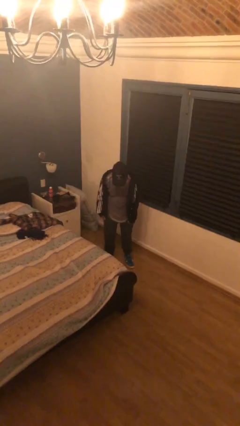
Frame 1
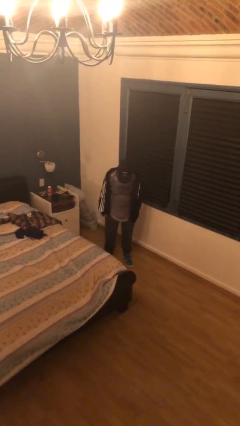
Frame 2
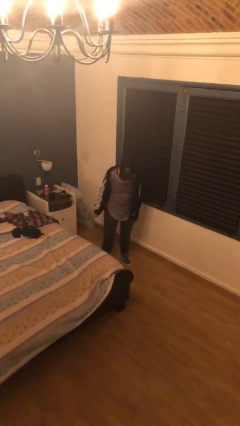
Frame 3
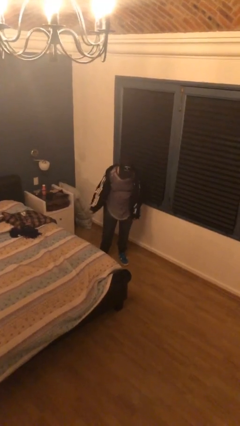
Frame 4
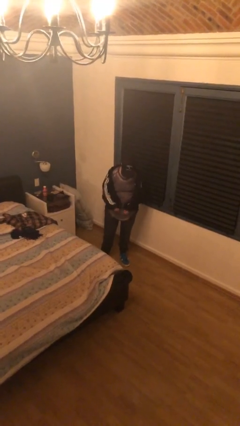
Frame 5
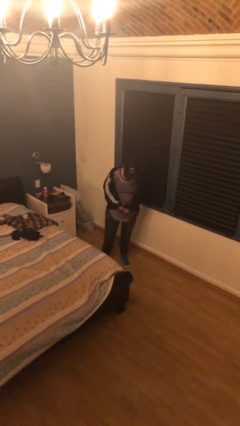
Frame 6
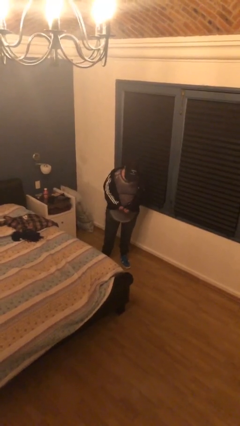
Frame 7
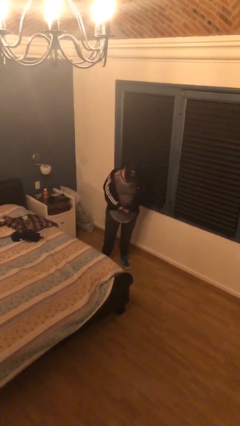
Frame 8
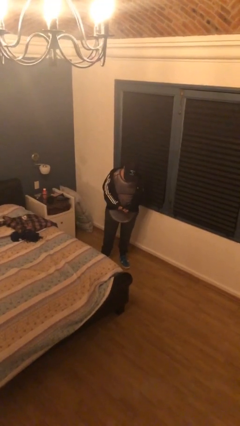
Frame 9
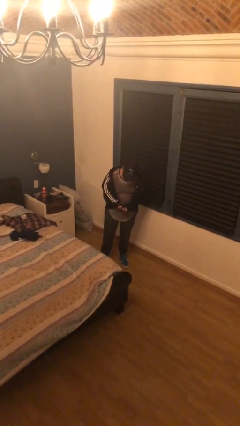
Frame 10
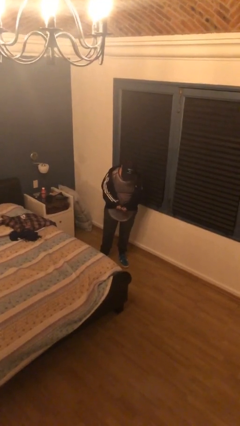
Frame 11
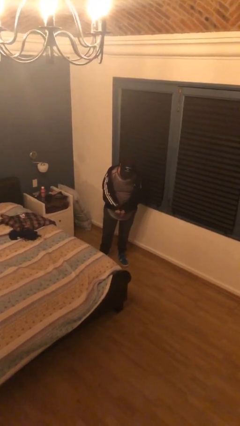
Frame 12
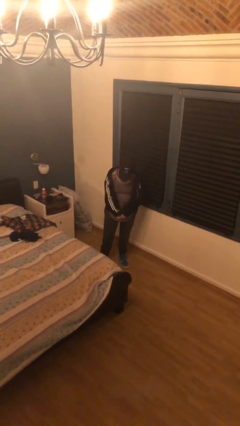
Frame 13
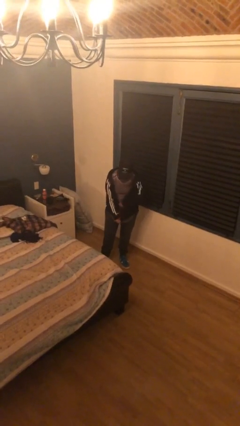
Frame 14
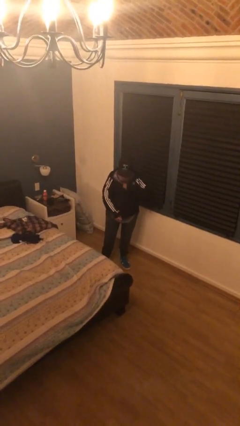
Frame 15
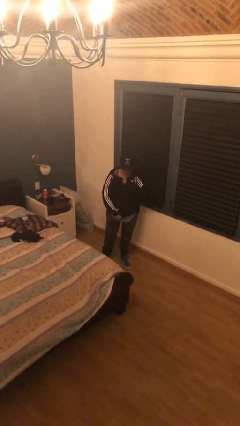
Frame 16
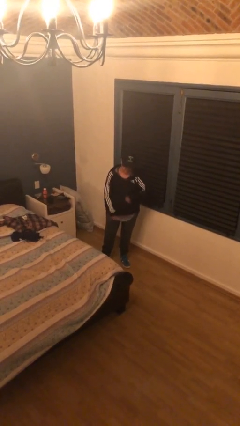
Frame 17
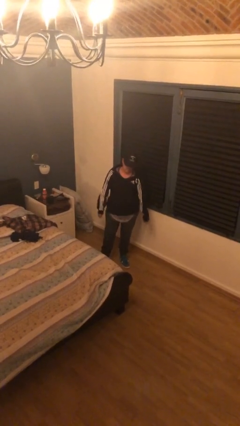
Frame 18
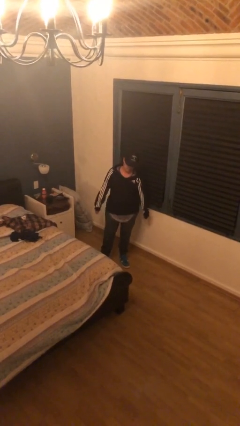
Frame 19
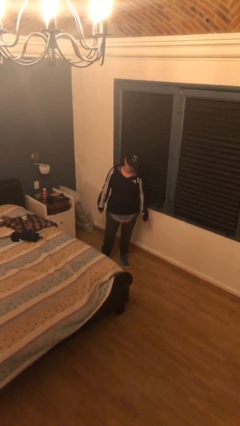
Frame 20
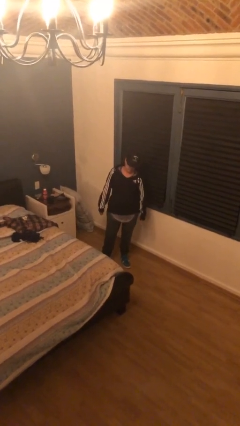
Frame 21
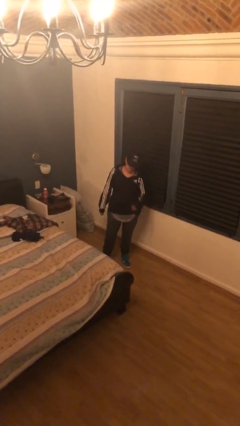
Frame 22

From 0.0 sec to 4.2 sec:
person zips up jacket

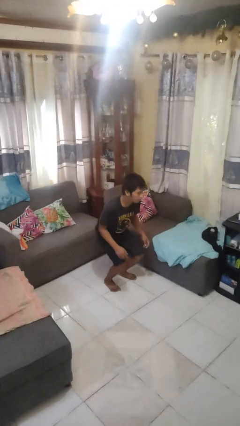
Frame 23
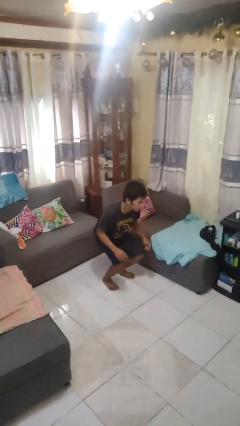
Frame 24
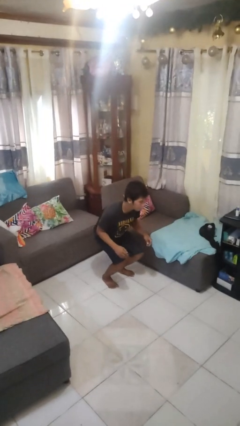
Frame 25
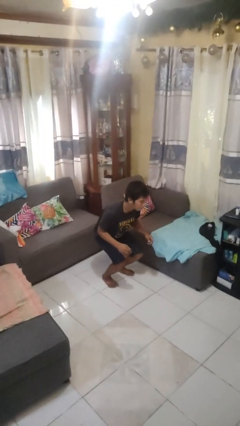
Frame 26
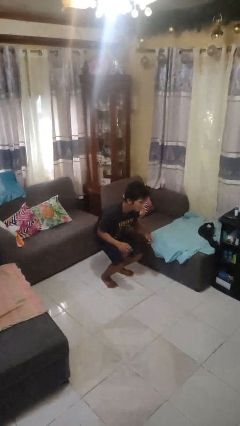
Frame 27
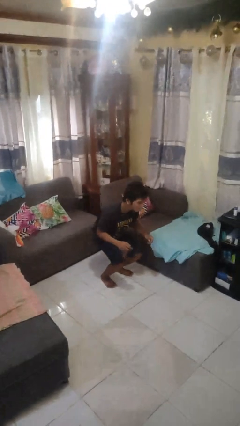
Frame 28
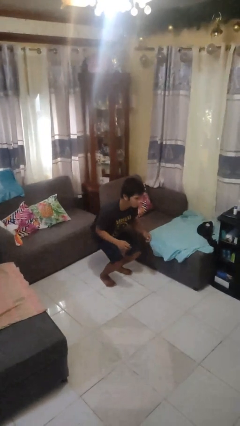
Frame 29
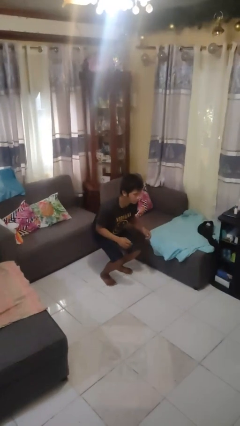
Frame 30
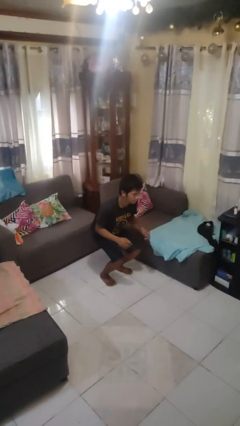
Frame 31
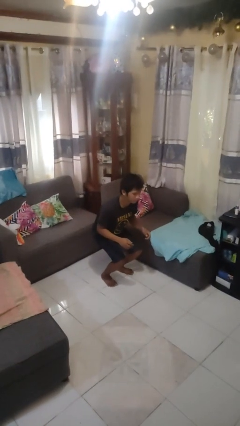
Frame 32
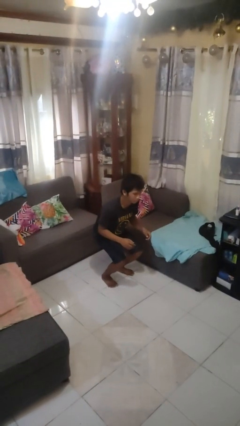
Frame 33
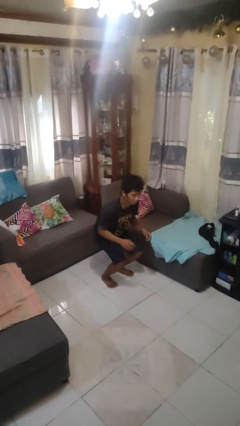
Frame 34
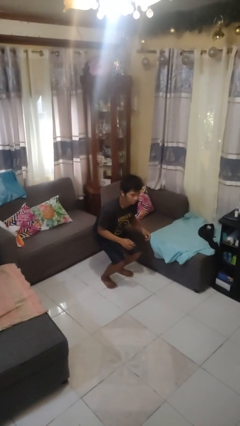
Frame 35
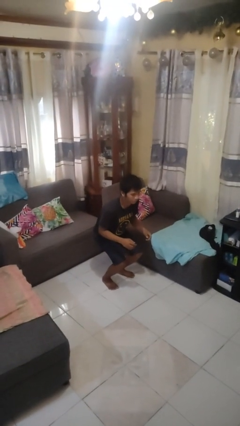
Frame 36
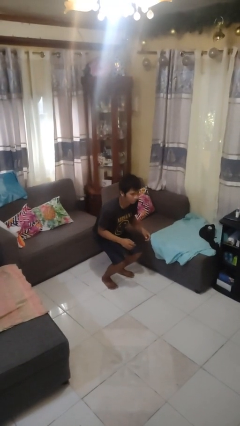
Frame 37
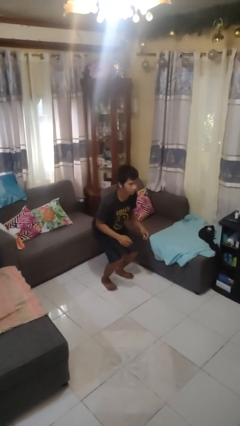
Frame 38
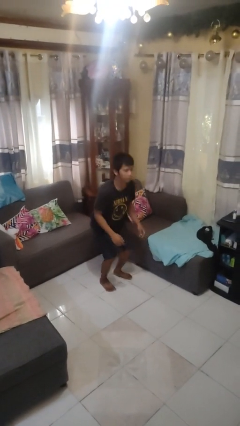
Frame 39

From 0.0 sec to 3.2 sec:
person squats

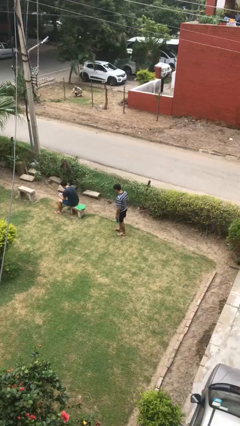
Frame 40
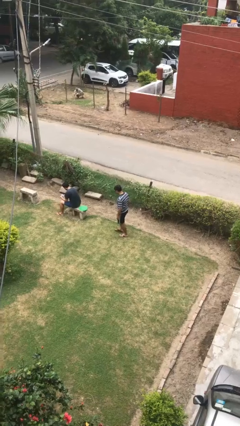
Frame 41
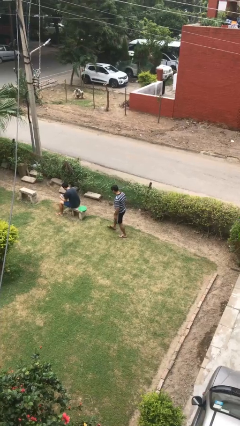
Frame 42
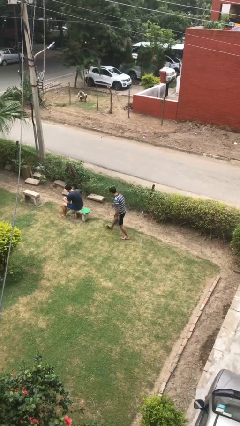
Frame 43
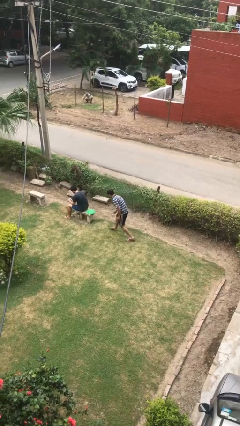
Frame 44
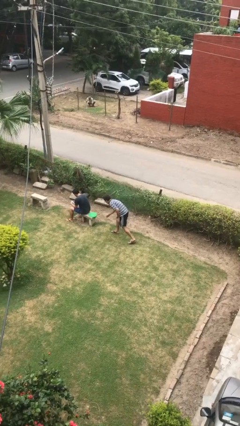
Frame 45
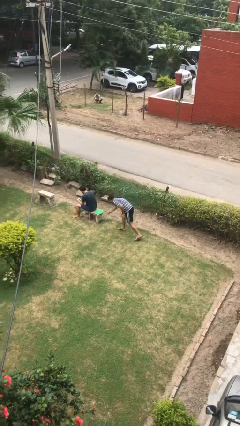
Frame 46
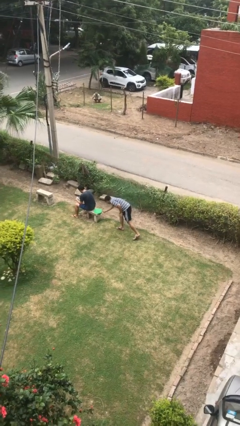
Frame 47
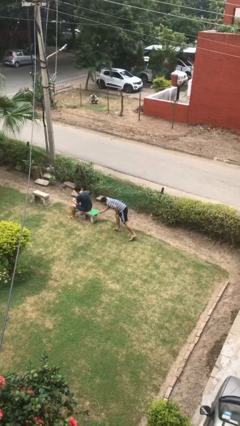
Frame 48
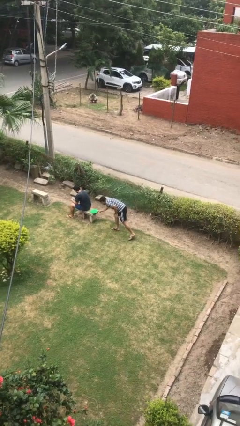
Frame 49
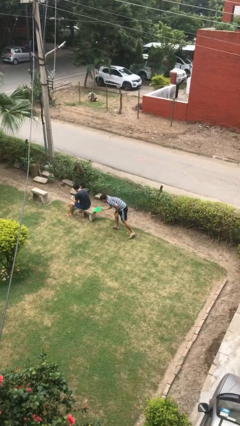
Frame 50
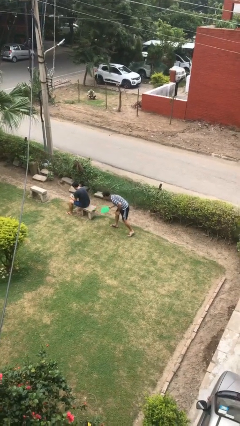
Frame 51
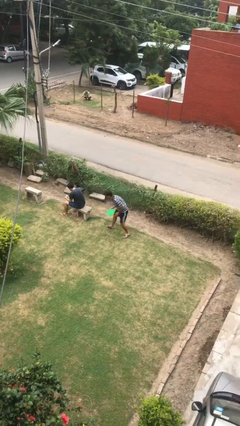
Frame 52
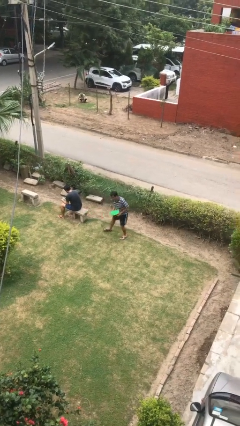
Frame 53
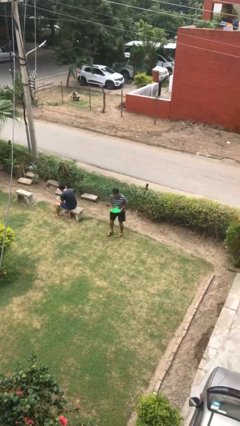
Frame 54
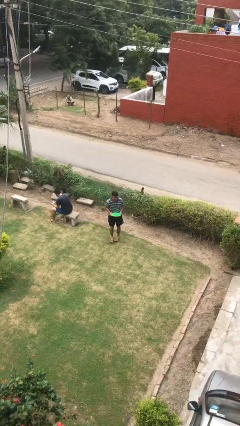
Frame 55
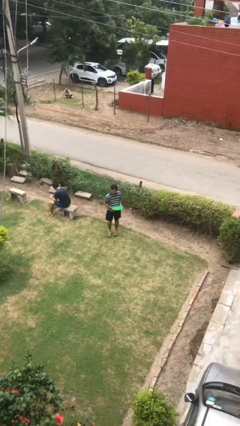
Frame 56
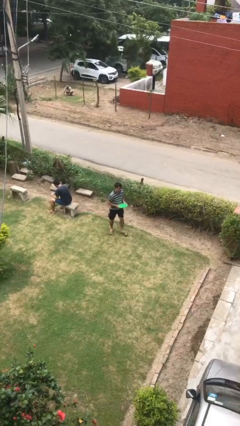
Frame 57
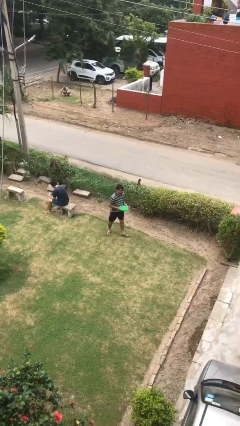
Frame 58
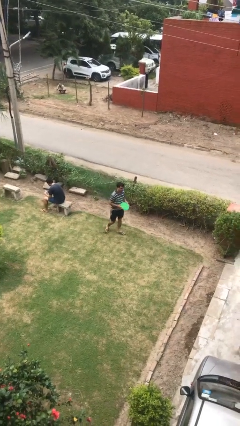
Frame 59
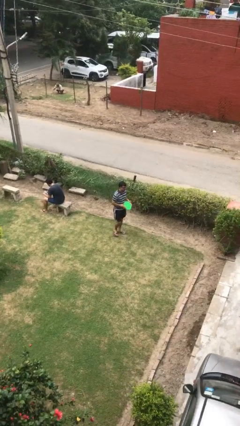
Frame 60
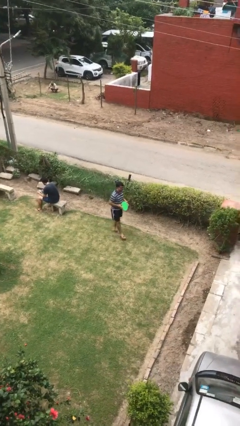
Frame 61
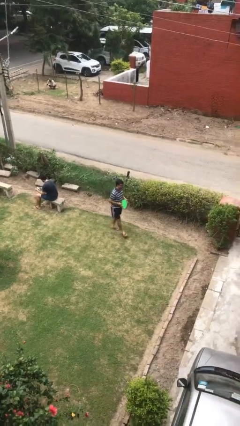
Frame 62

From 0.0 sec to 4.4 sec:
person steals object from person

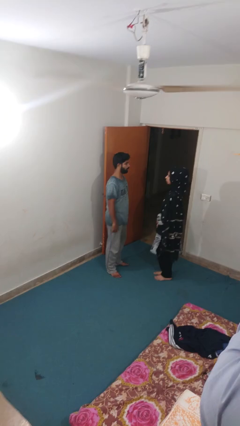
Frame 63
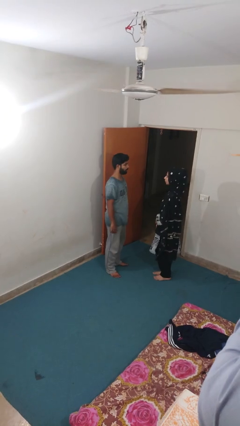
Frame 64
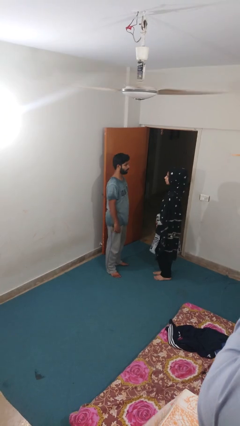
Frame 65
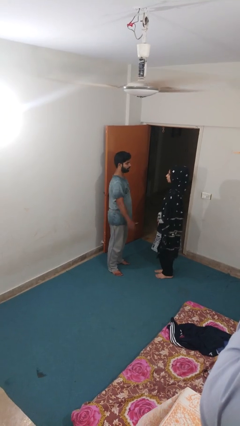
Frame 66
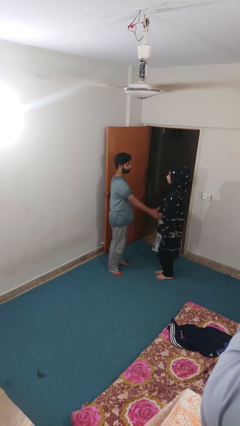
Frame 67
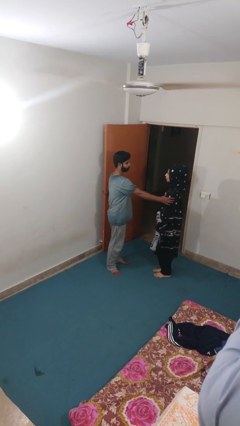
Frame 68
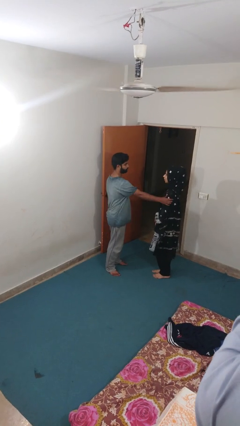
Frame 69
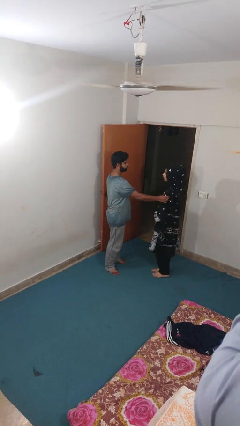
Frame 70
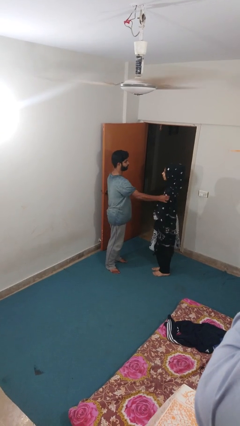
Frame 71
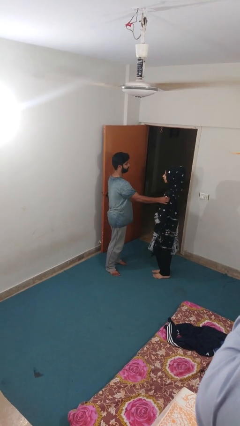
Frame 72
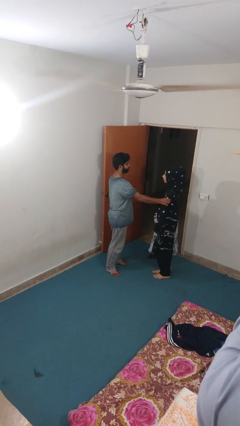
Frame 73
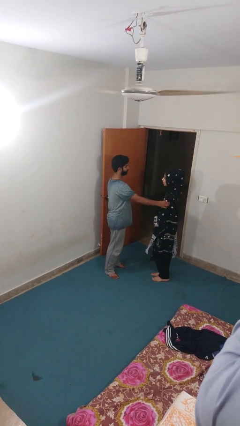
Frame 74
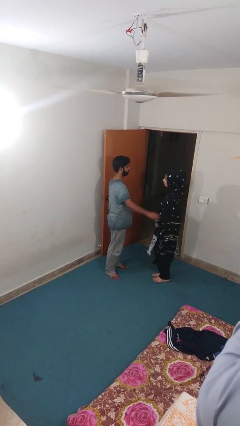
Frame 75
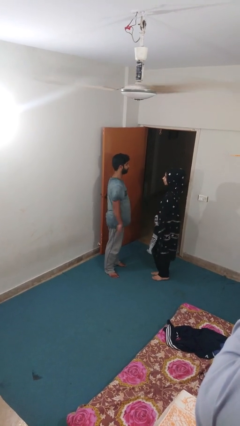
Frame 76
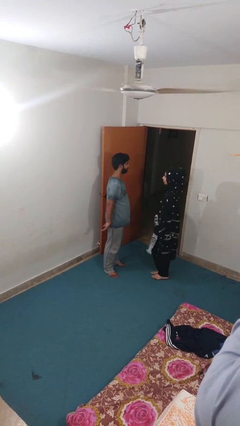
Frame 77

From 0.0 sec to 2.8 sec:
person grabs person by bicep

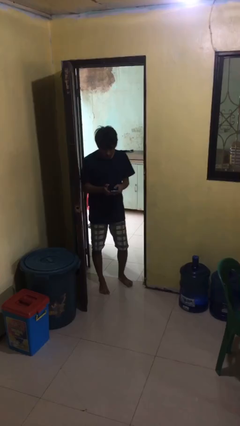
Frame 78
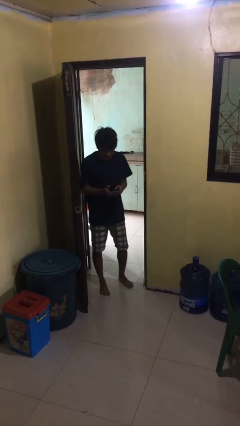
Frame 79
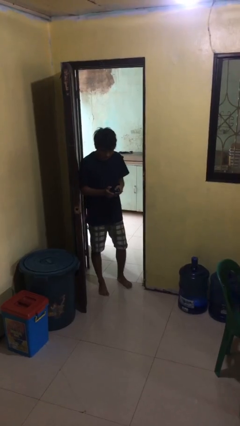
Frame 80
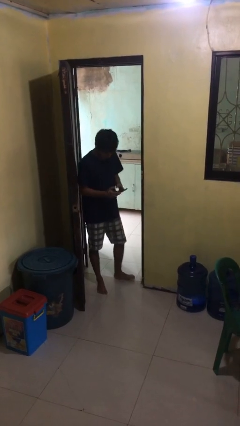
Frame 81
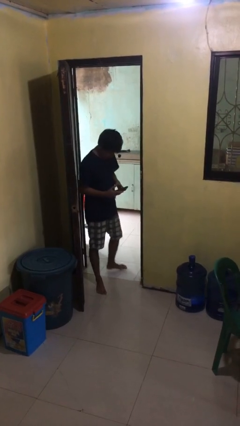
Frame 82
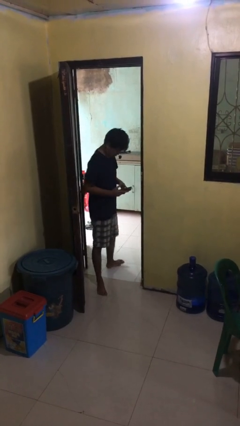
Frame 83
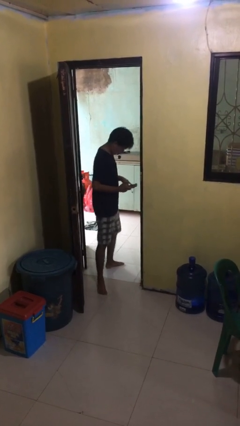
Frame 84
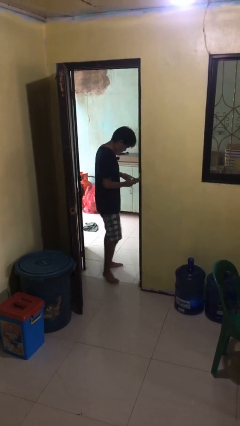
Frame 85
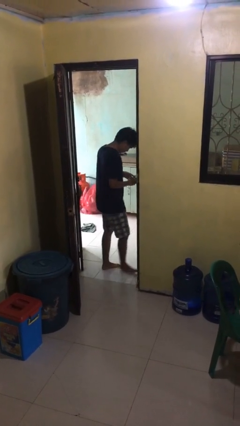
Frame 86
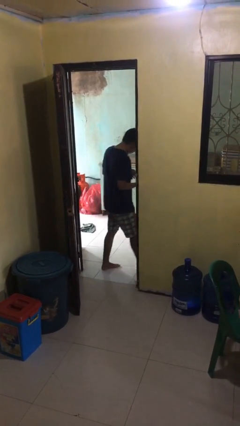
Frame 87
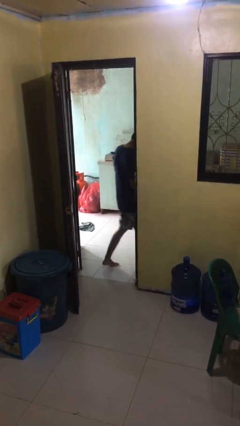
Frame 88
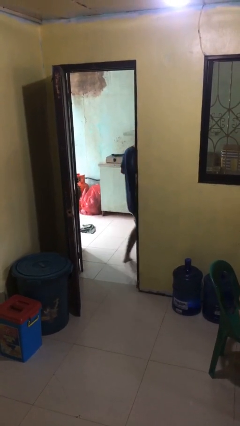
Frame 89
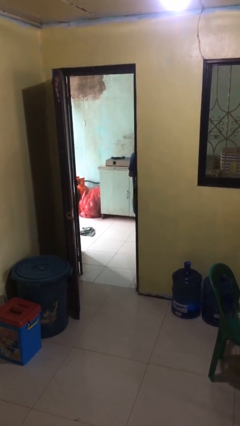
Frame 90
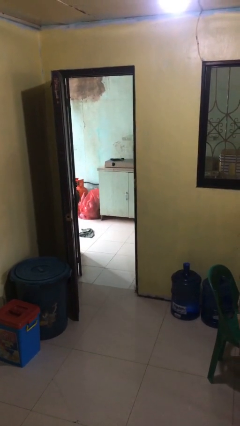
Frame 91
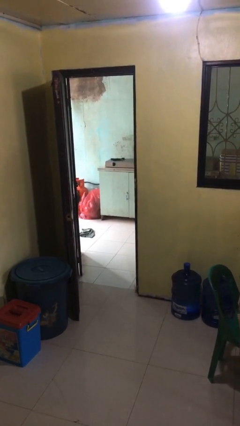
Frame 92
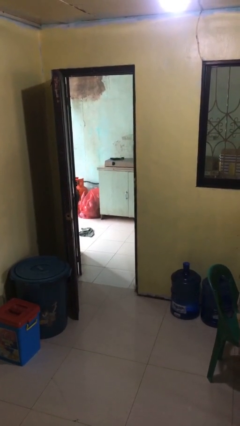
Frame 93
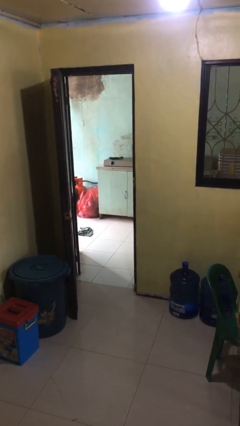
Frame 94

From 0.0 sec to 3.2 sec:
person exits scene through structure
